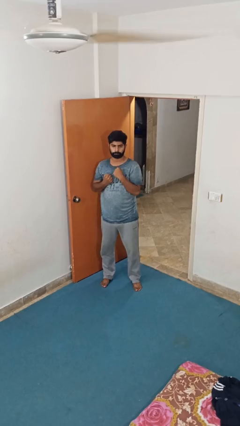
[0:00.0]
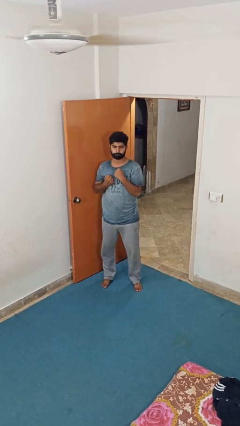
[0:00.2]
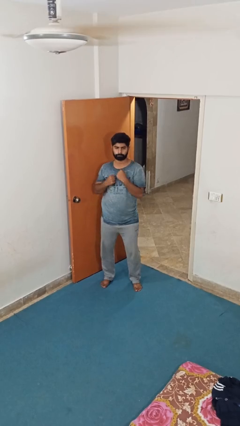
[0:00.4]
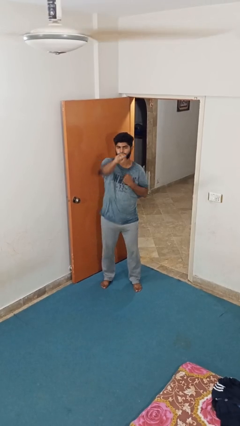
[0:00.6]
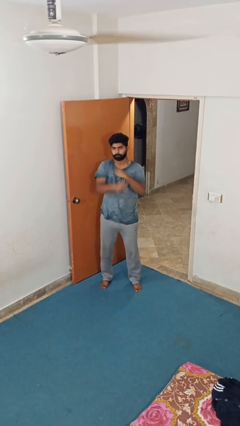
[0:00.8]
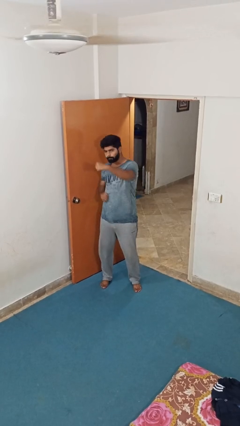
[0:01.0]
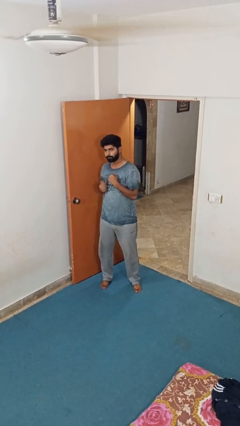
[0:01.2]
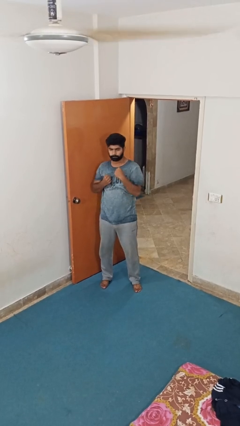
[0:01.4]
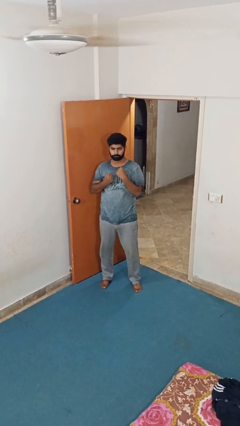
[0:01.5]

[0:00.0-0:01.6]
person punches

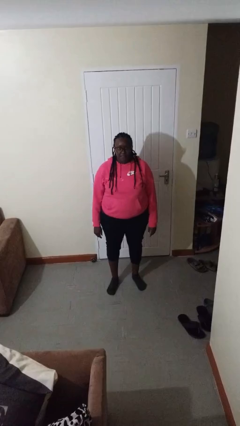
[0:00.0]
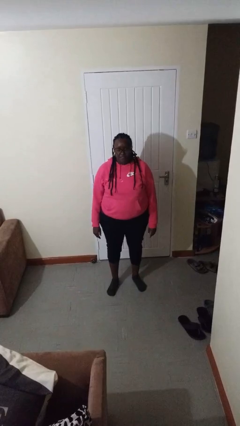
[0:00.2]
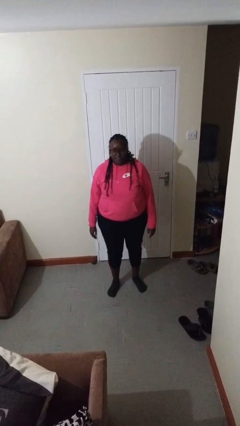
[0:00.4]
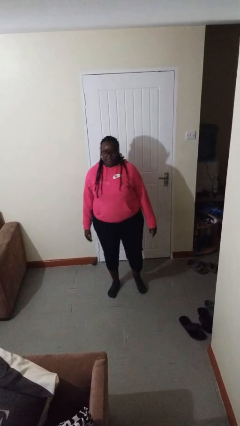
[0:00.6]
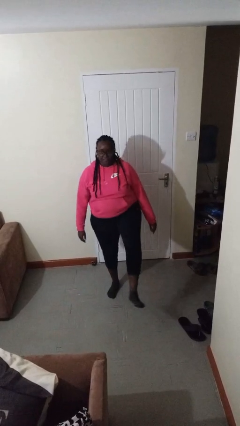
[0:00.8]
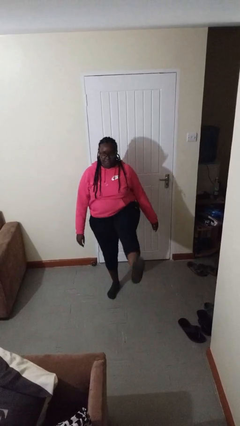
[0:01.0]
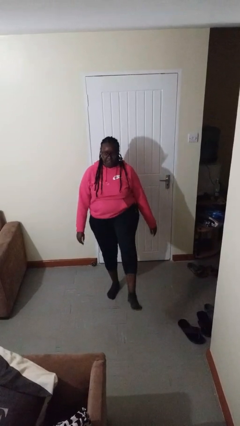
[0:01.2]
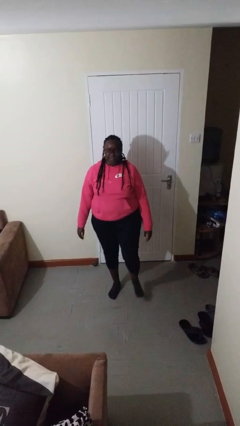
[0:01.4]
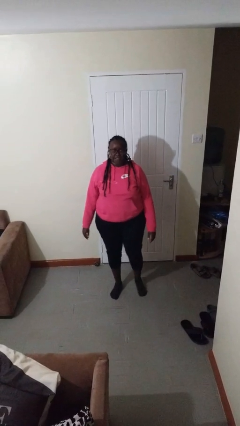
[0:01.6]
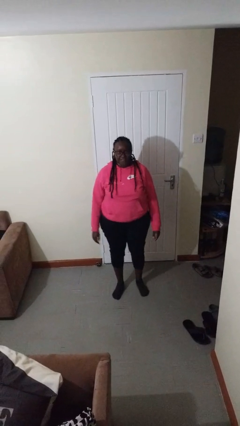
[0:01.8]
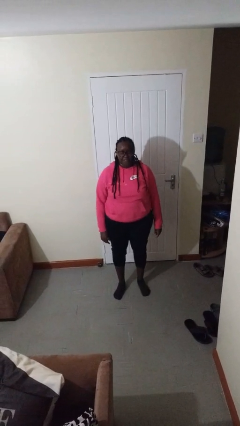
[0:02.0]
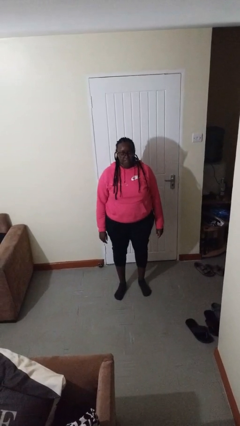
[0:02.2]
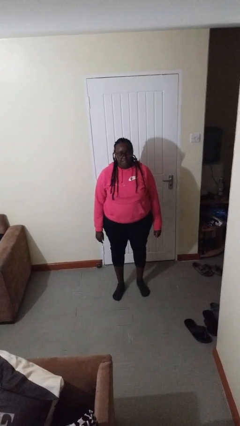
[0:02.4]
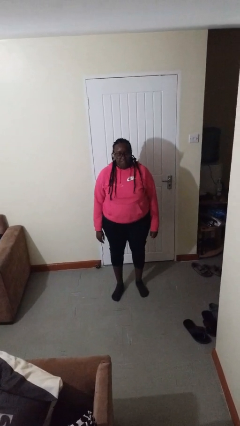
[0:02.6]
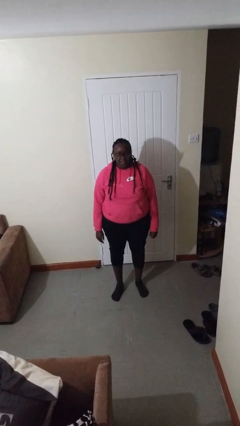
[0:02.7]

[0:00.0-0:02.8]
person karate kicks

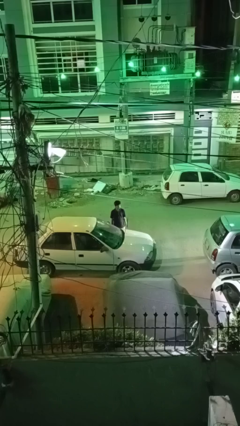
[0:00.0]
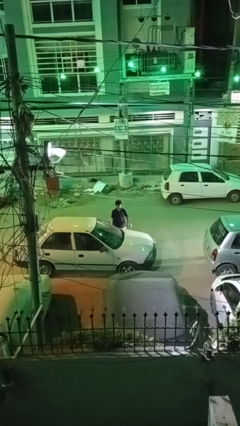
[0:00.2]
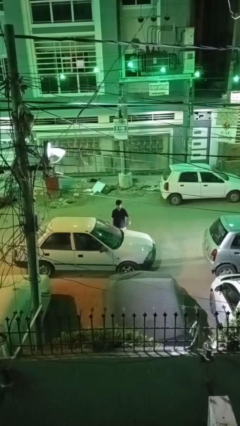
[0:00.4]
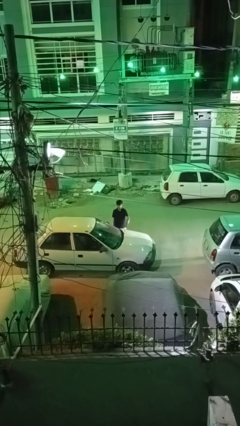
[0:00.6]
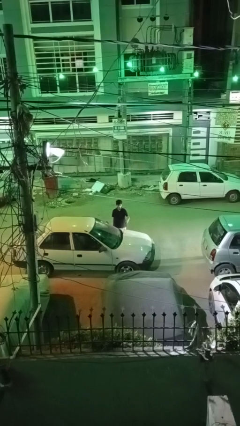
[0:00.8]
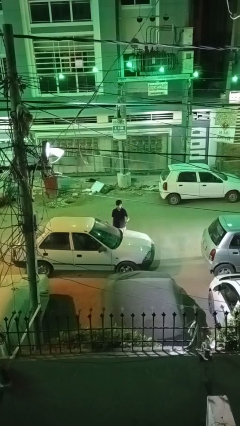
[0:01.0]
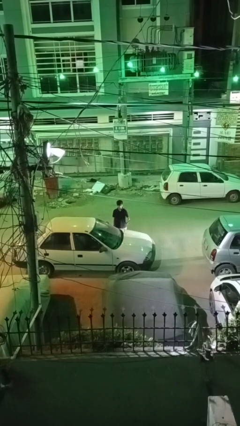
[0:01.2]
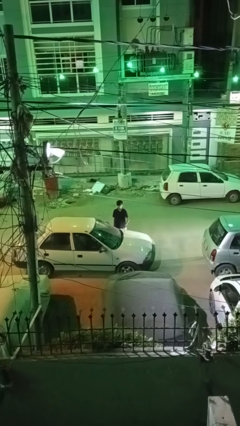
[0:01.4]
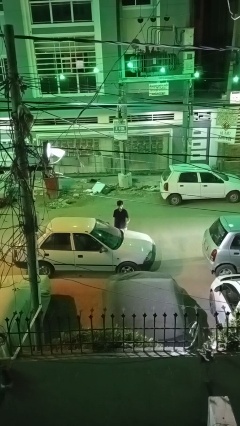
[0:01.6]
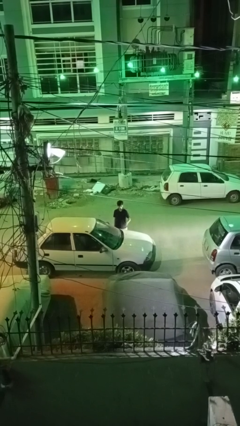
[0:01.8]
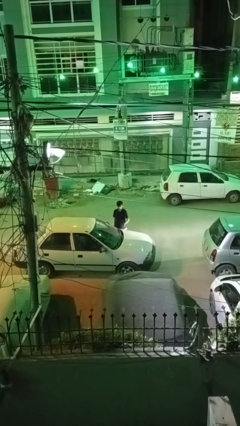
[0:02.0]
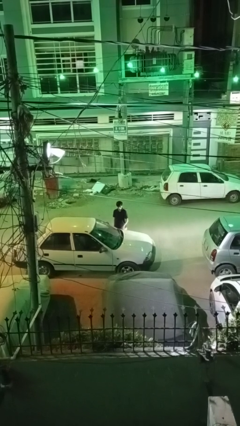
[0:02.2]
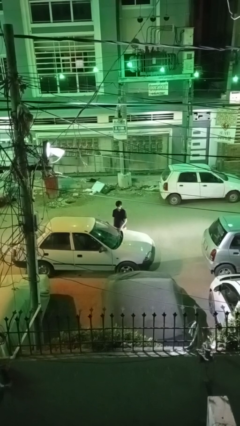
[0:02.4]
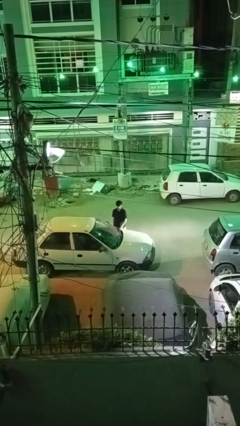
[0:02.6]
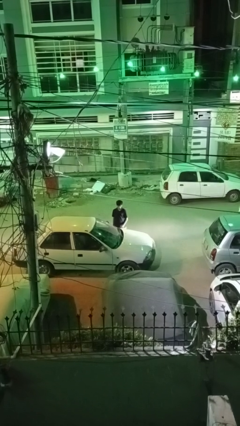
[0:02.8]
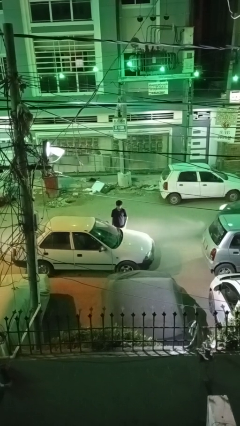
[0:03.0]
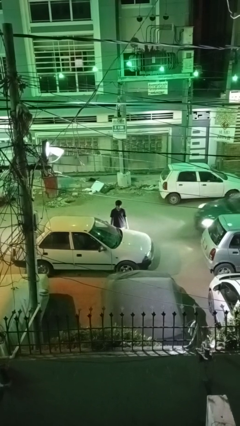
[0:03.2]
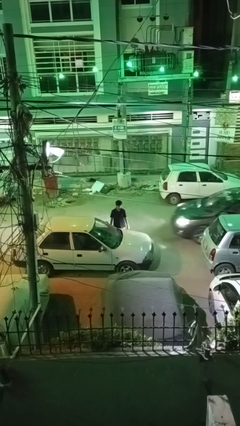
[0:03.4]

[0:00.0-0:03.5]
person flips down car wipers

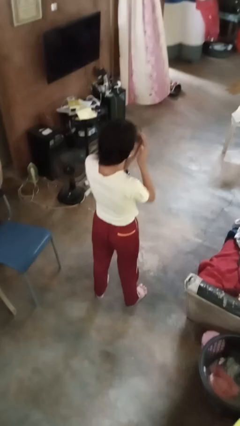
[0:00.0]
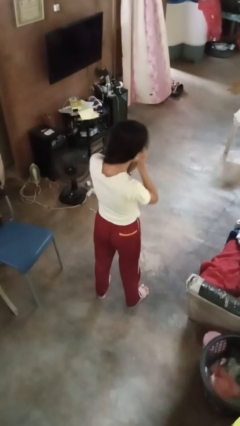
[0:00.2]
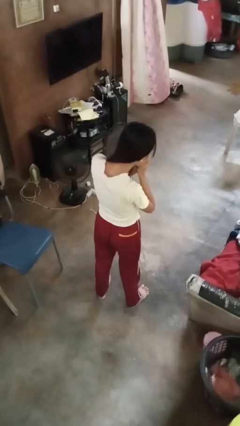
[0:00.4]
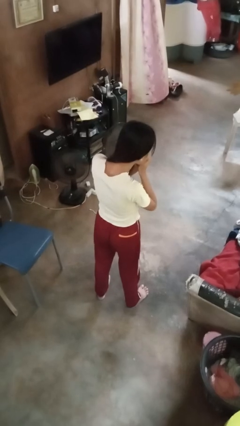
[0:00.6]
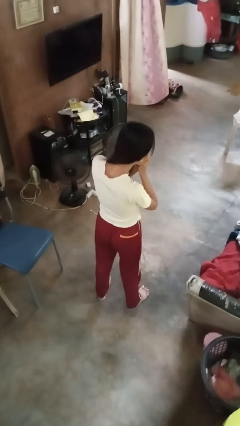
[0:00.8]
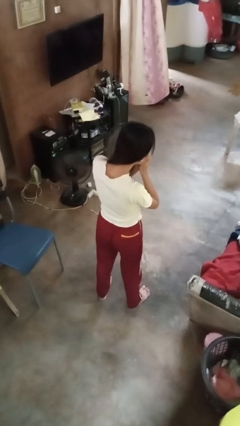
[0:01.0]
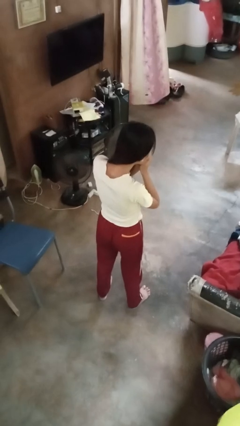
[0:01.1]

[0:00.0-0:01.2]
person sneezes into hand

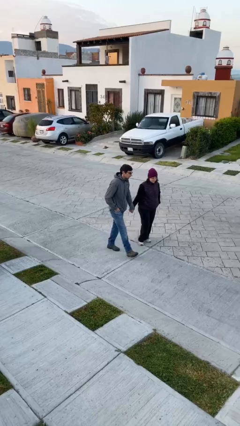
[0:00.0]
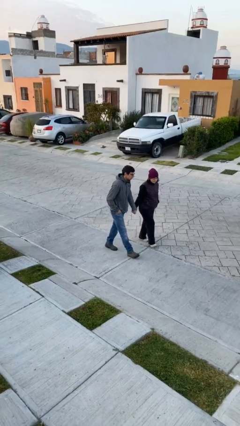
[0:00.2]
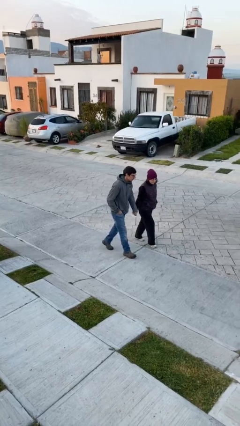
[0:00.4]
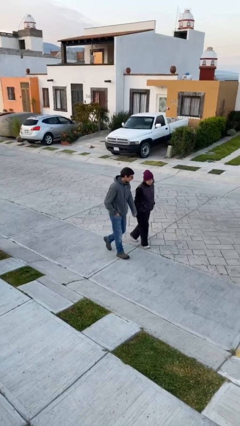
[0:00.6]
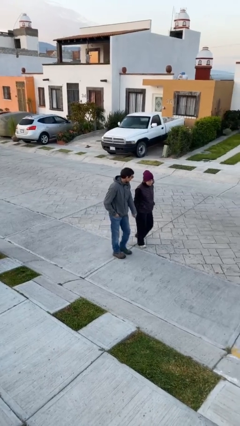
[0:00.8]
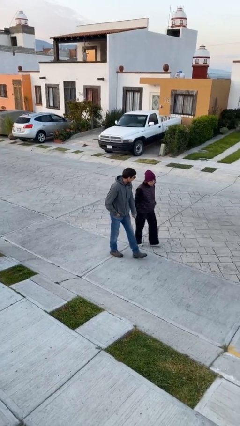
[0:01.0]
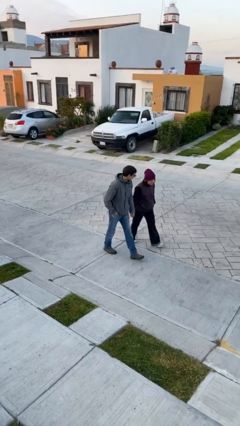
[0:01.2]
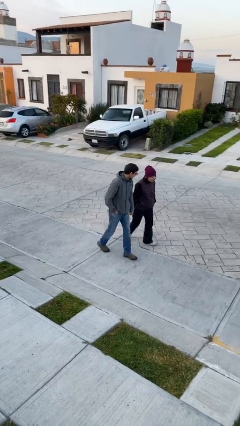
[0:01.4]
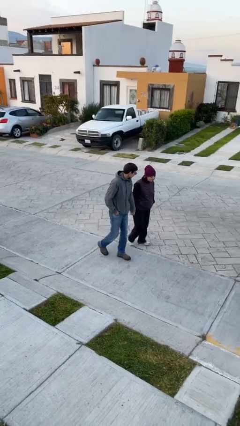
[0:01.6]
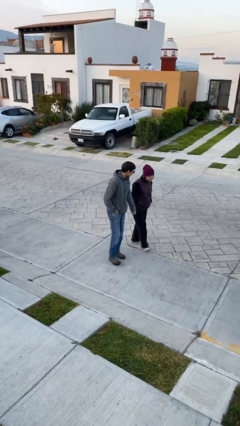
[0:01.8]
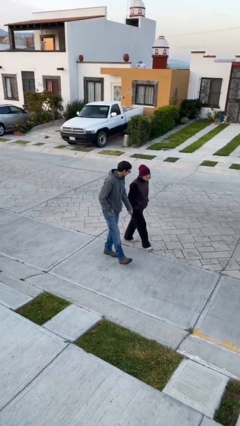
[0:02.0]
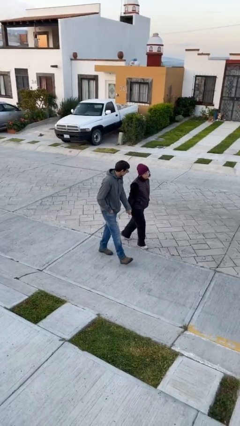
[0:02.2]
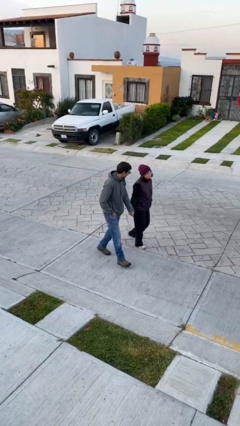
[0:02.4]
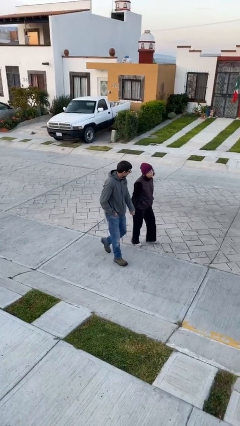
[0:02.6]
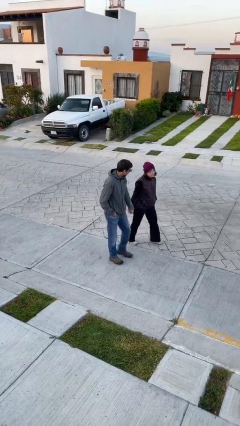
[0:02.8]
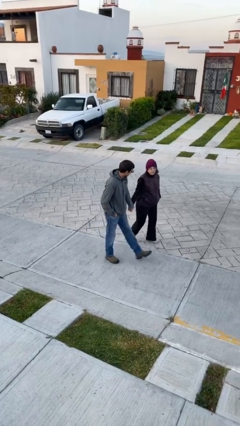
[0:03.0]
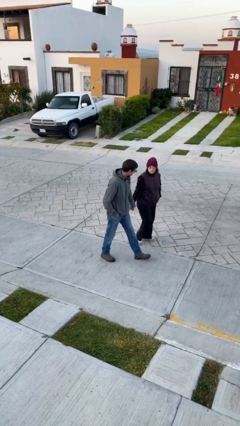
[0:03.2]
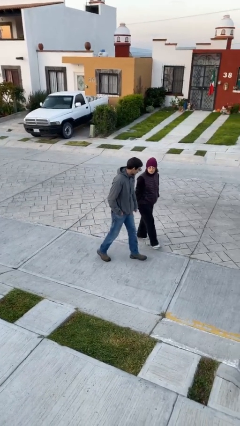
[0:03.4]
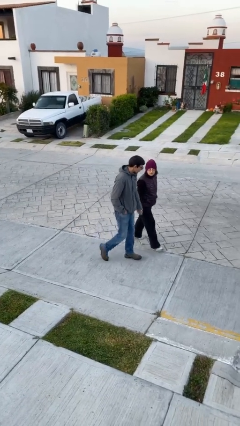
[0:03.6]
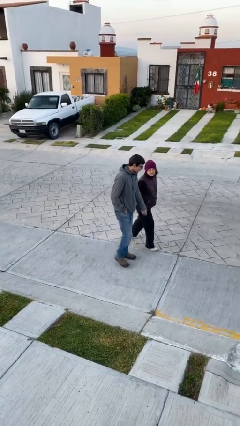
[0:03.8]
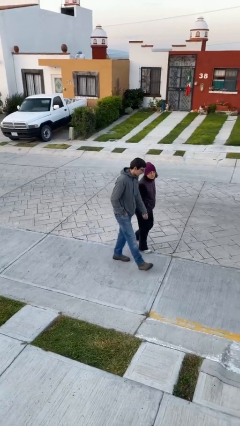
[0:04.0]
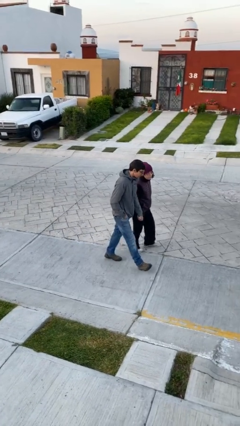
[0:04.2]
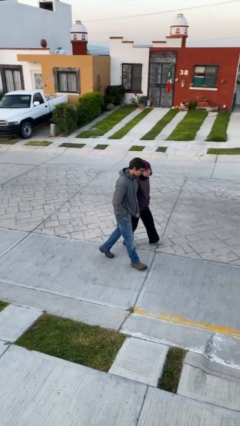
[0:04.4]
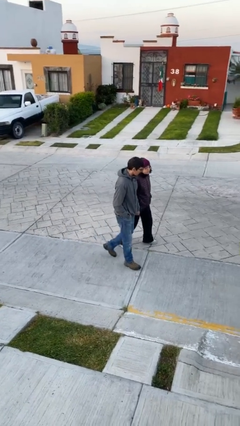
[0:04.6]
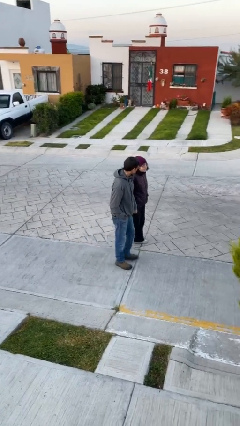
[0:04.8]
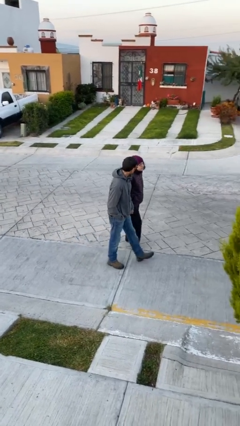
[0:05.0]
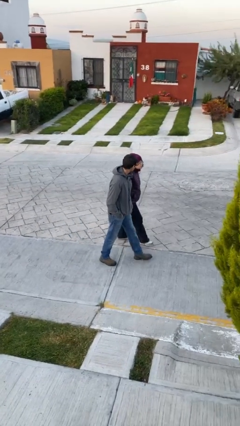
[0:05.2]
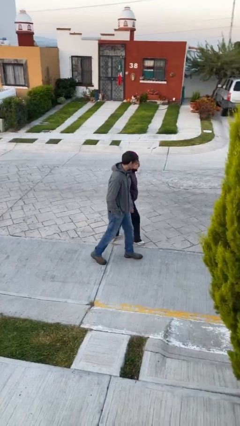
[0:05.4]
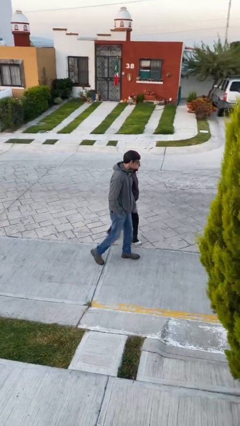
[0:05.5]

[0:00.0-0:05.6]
person holds hand

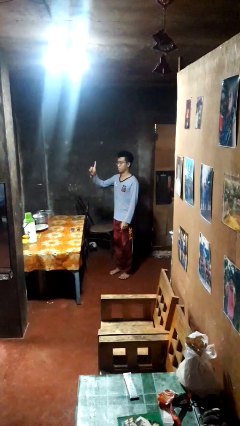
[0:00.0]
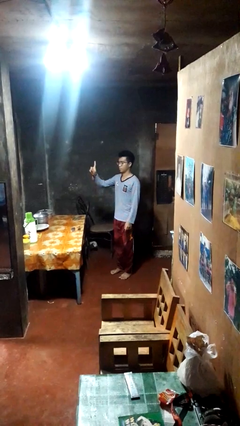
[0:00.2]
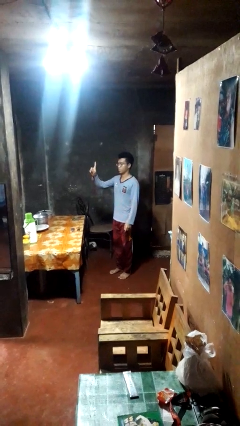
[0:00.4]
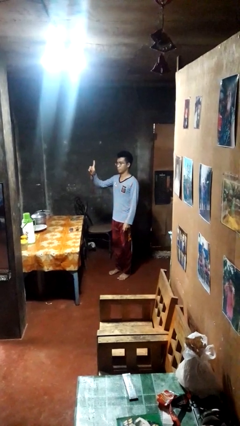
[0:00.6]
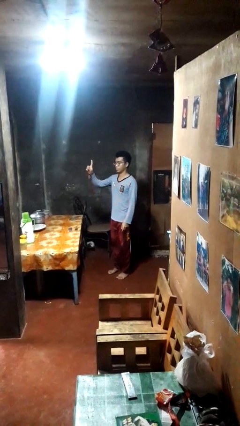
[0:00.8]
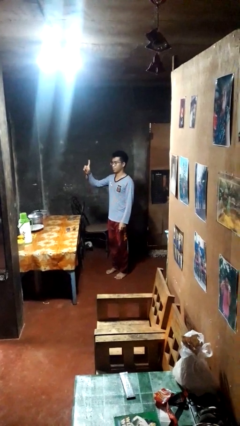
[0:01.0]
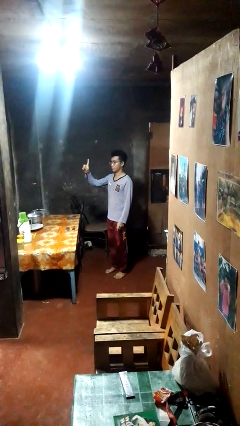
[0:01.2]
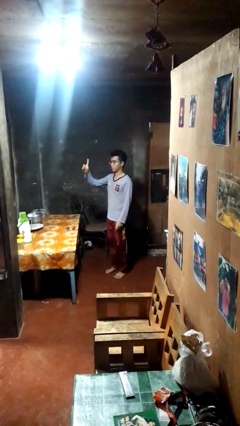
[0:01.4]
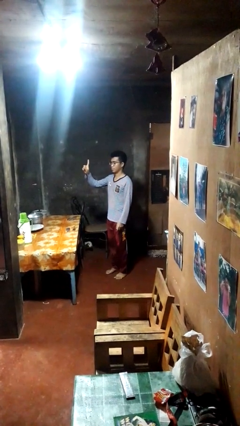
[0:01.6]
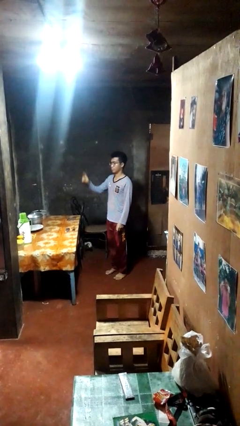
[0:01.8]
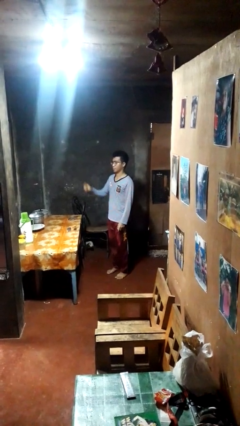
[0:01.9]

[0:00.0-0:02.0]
person gestures number one

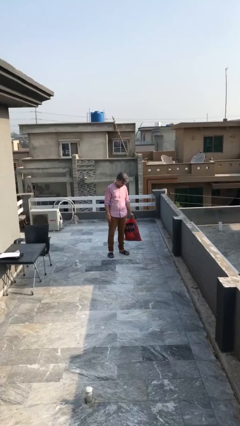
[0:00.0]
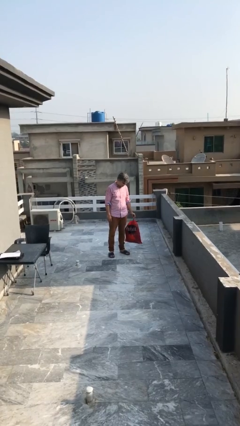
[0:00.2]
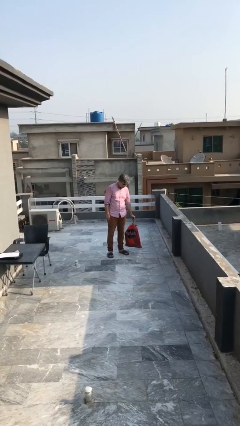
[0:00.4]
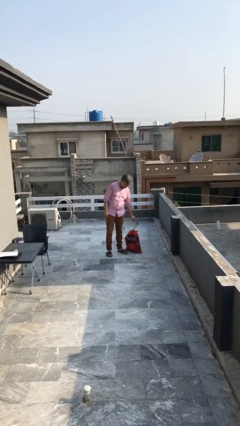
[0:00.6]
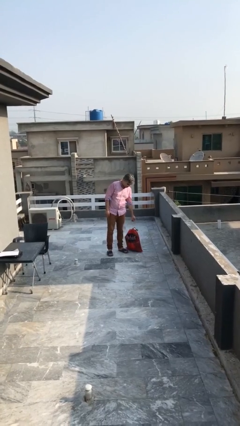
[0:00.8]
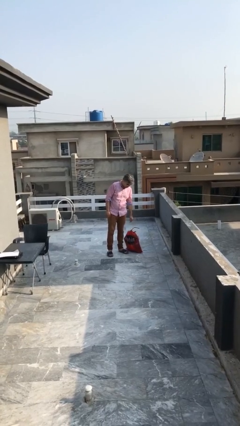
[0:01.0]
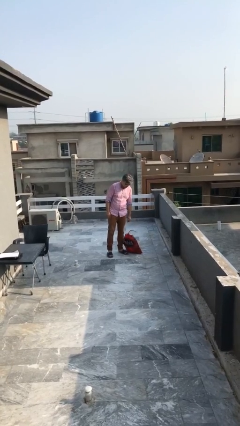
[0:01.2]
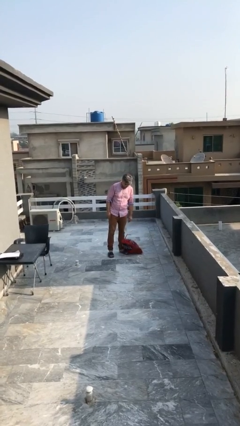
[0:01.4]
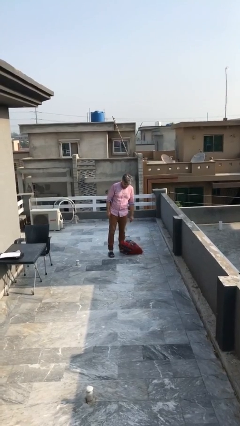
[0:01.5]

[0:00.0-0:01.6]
person puts down object on floor
